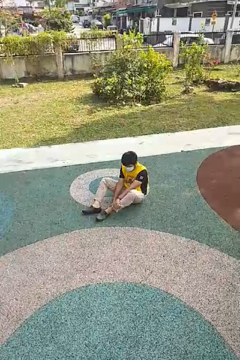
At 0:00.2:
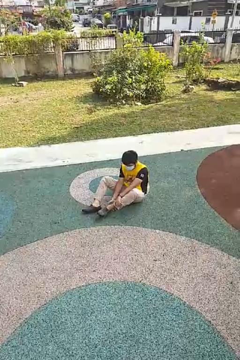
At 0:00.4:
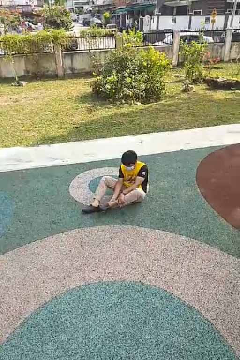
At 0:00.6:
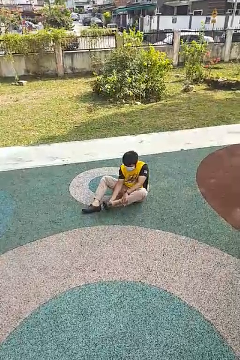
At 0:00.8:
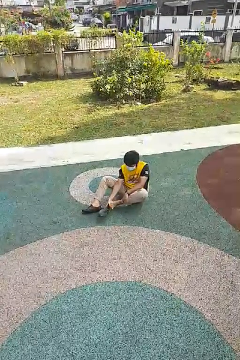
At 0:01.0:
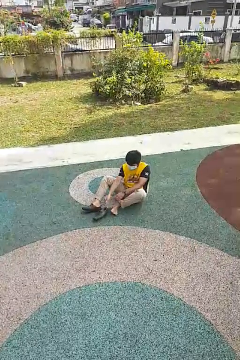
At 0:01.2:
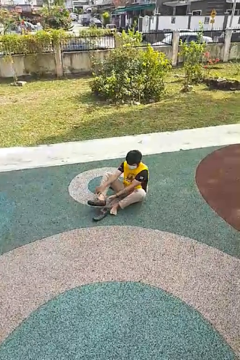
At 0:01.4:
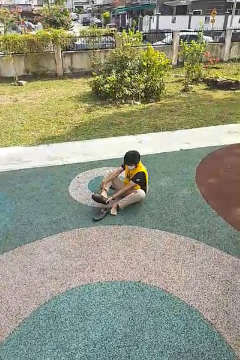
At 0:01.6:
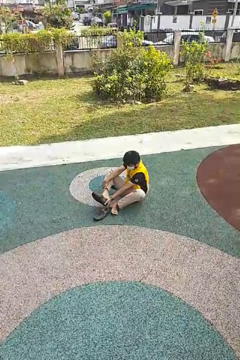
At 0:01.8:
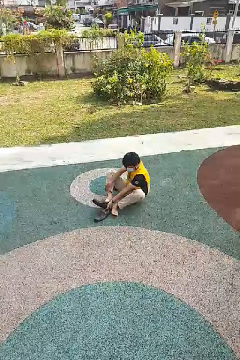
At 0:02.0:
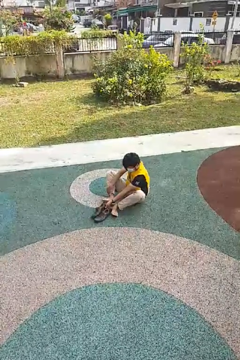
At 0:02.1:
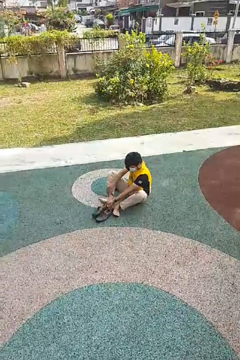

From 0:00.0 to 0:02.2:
person takes off shoes

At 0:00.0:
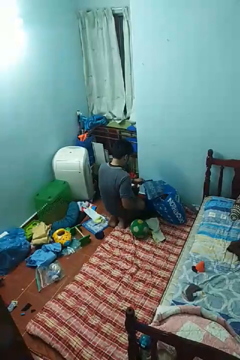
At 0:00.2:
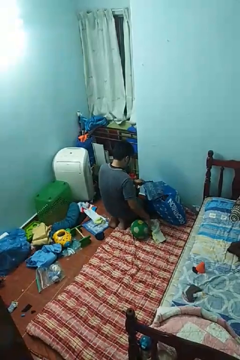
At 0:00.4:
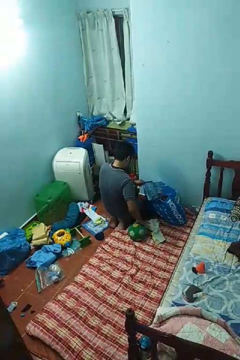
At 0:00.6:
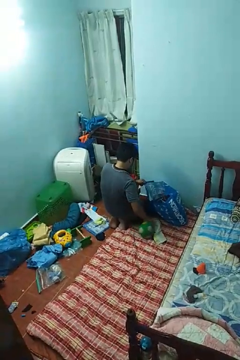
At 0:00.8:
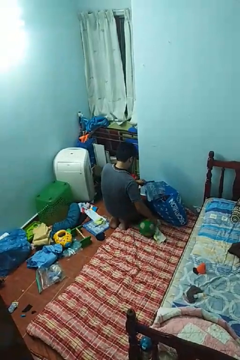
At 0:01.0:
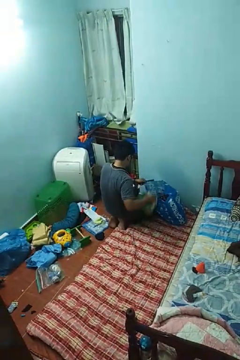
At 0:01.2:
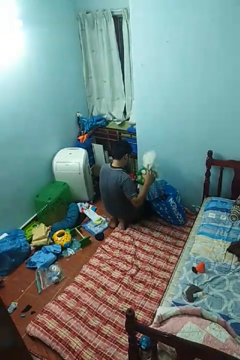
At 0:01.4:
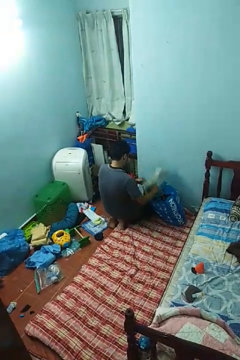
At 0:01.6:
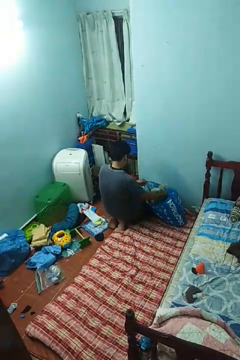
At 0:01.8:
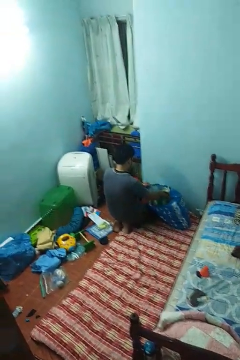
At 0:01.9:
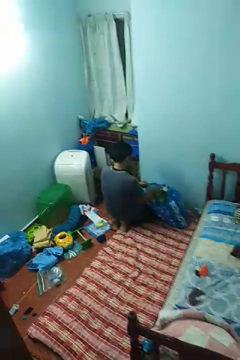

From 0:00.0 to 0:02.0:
person puts object into bag

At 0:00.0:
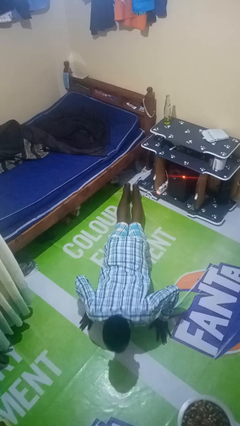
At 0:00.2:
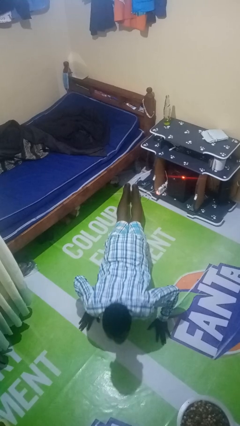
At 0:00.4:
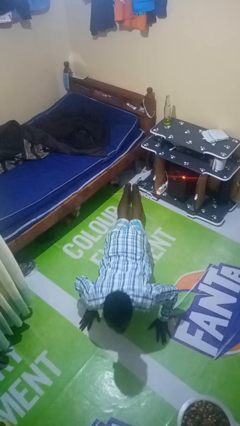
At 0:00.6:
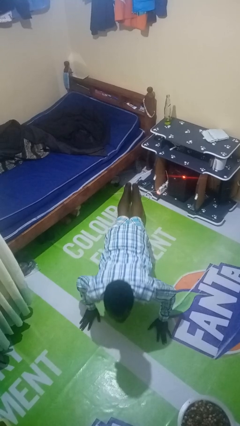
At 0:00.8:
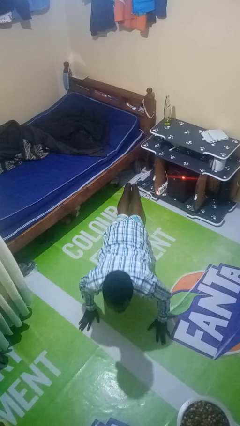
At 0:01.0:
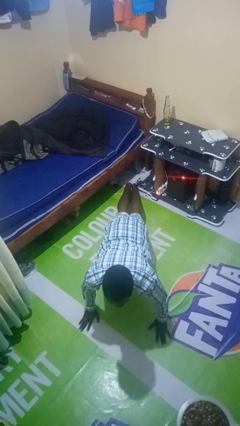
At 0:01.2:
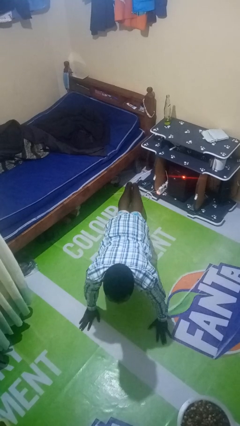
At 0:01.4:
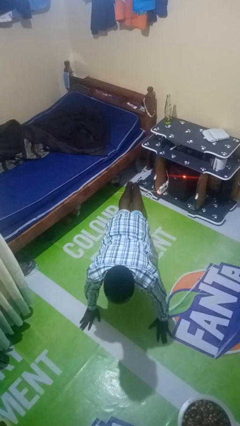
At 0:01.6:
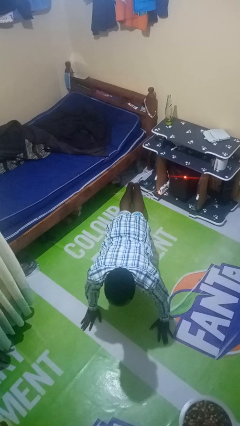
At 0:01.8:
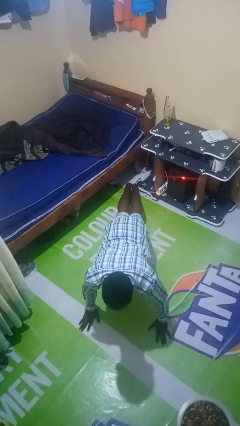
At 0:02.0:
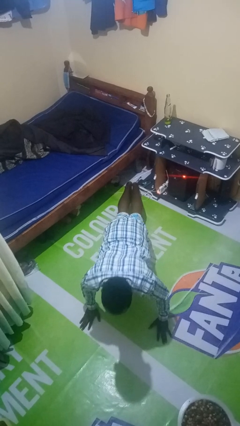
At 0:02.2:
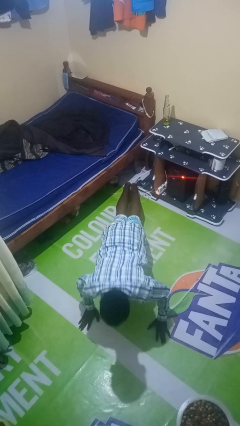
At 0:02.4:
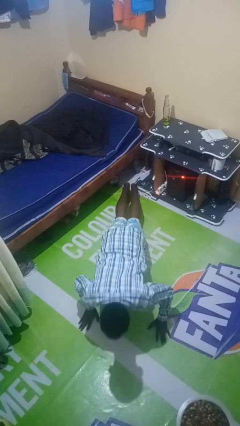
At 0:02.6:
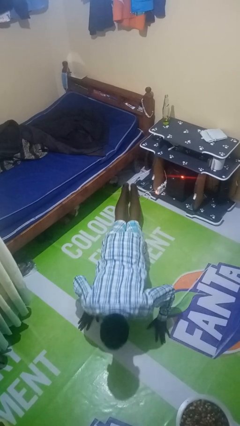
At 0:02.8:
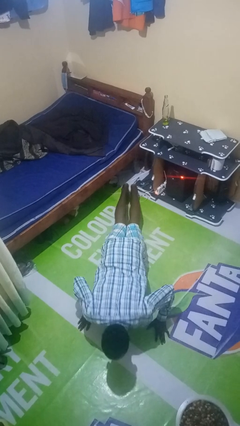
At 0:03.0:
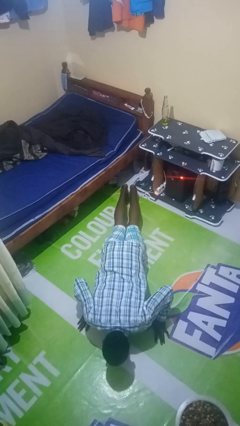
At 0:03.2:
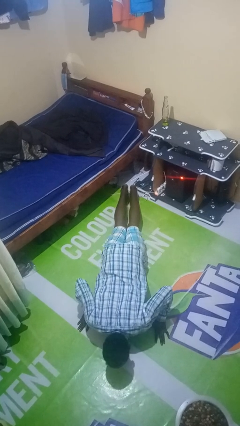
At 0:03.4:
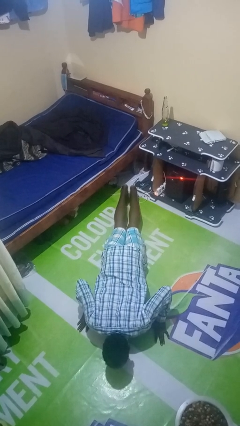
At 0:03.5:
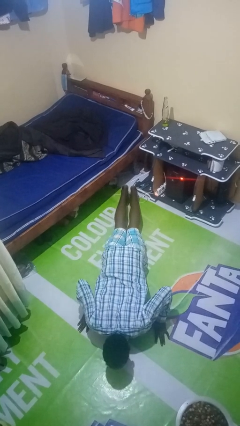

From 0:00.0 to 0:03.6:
person exercises with pushup

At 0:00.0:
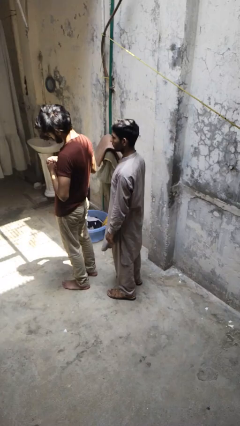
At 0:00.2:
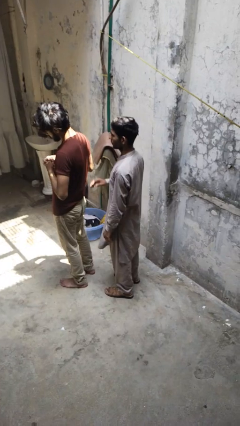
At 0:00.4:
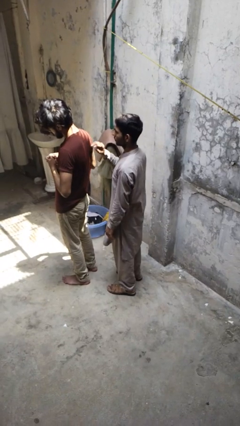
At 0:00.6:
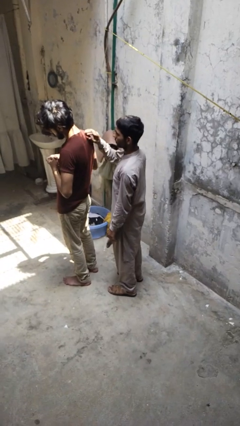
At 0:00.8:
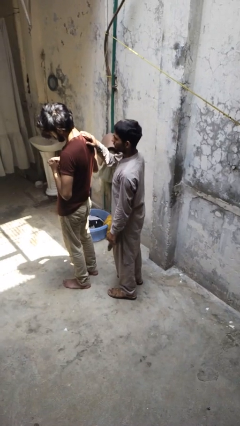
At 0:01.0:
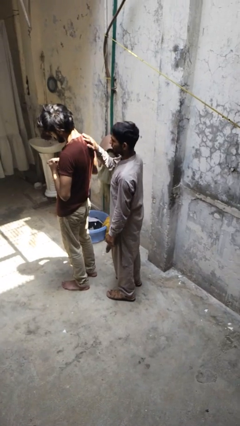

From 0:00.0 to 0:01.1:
person touches back of person

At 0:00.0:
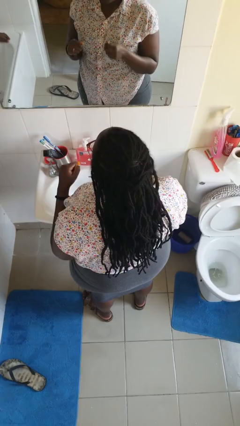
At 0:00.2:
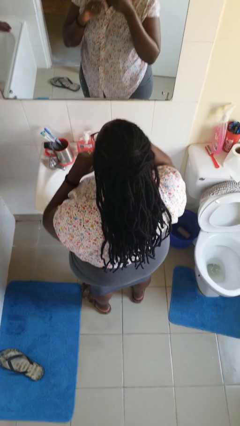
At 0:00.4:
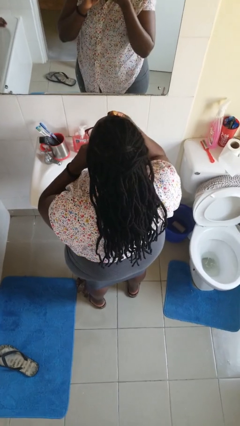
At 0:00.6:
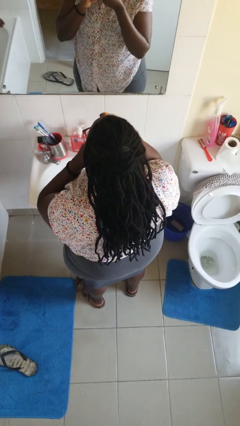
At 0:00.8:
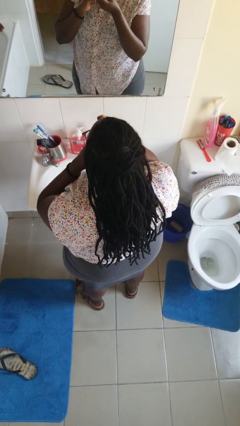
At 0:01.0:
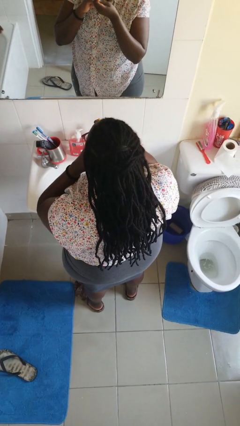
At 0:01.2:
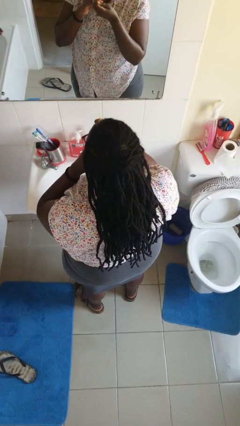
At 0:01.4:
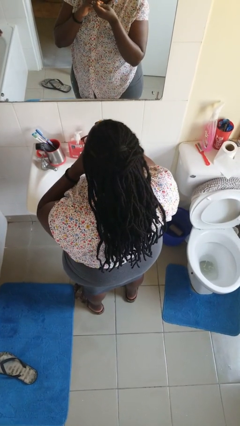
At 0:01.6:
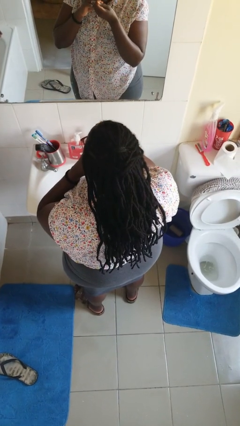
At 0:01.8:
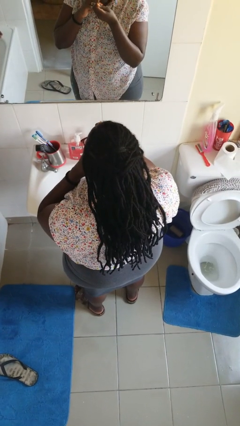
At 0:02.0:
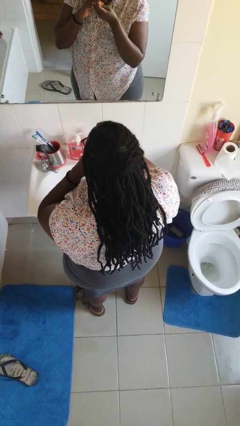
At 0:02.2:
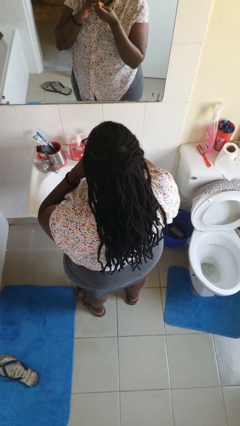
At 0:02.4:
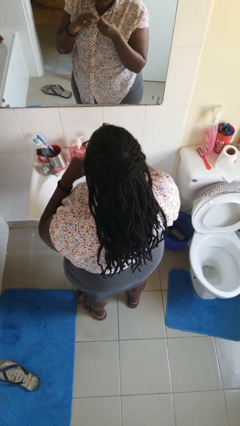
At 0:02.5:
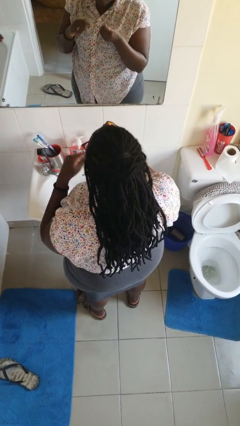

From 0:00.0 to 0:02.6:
person flosses

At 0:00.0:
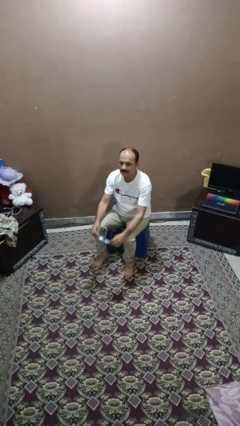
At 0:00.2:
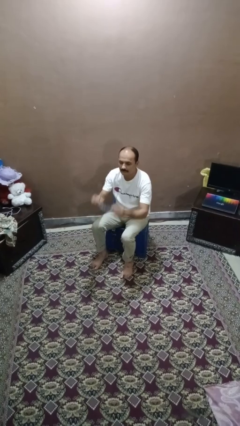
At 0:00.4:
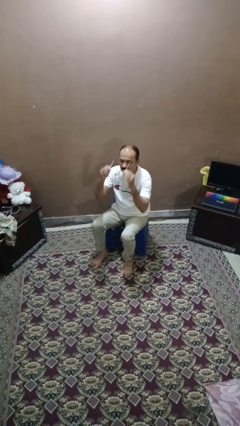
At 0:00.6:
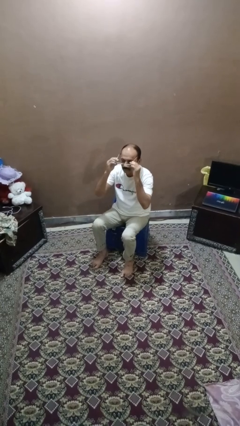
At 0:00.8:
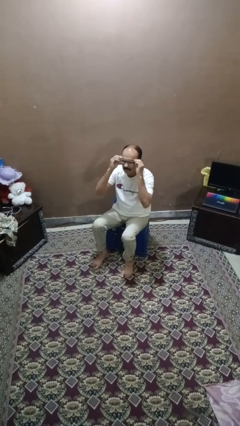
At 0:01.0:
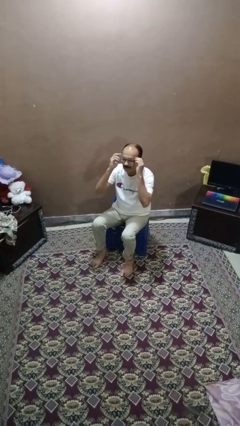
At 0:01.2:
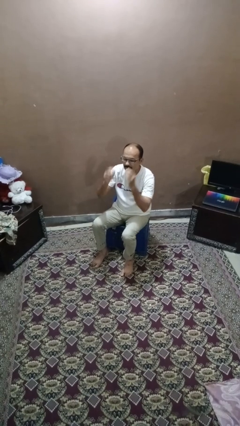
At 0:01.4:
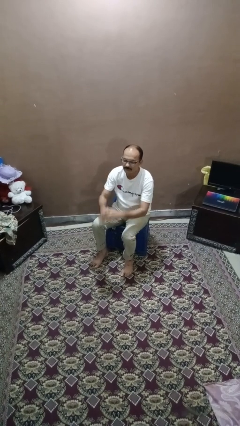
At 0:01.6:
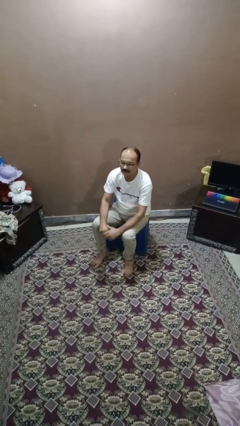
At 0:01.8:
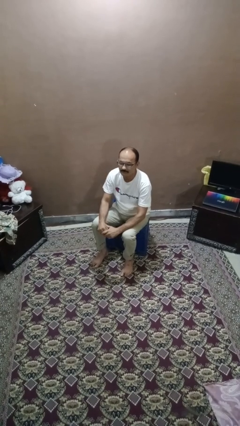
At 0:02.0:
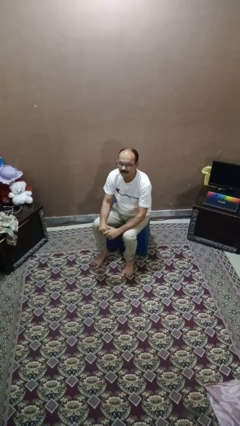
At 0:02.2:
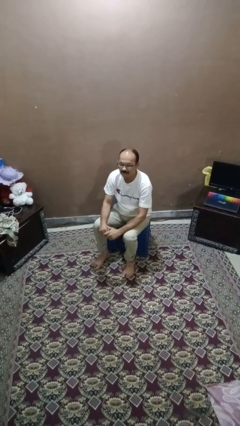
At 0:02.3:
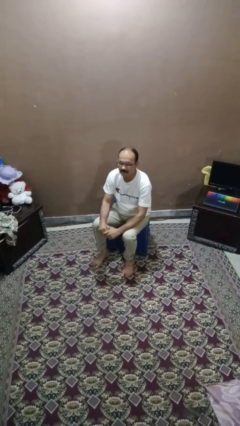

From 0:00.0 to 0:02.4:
person puts on glasses

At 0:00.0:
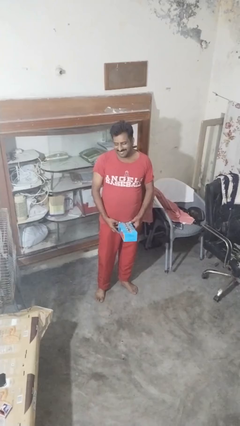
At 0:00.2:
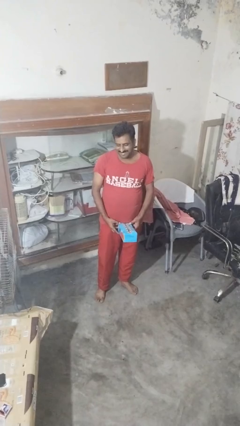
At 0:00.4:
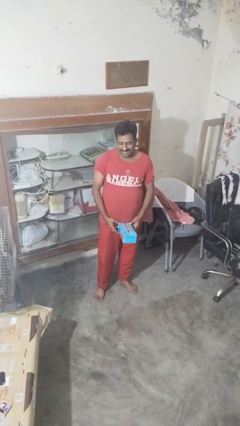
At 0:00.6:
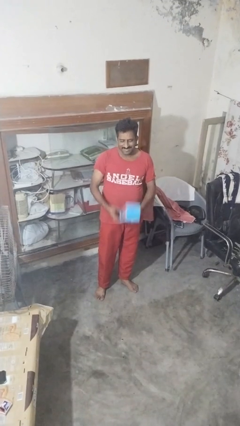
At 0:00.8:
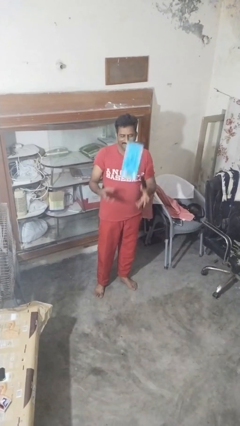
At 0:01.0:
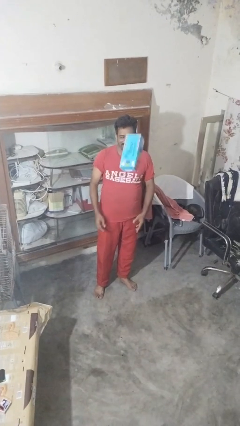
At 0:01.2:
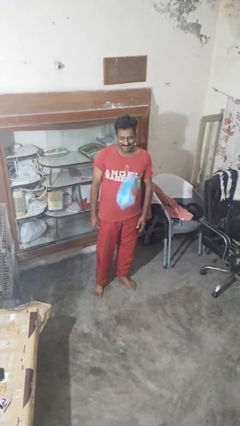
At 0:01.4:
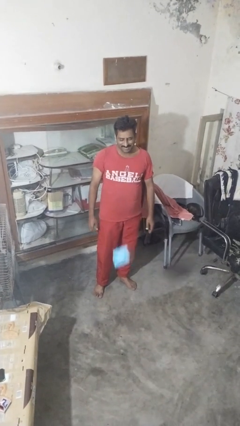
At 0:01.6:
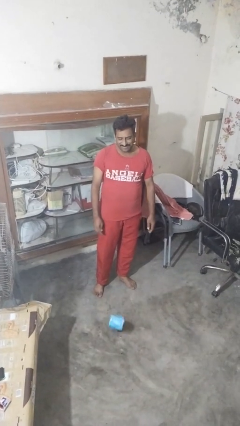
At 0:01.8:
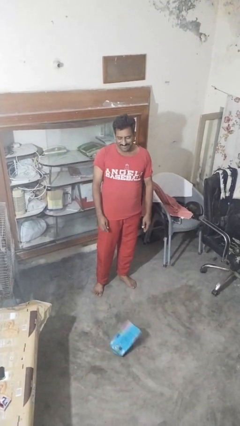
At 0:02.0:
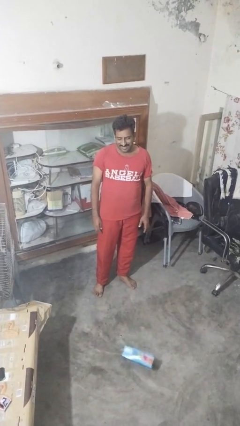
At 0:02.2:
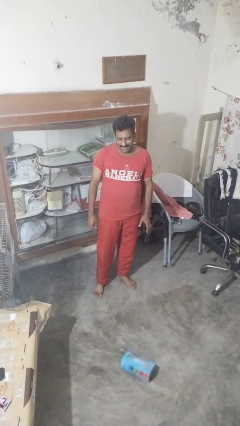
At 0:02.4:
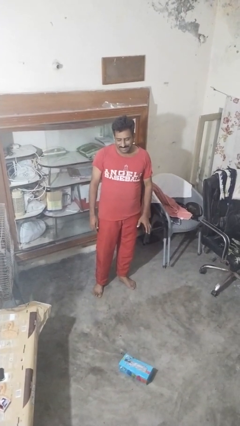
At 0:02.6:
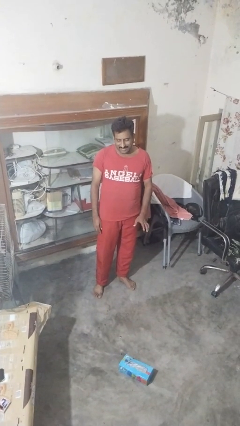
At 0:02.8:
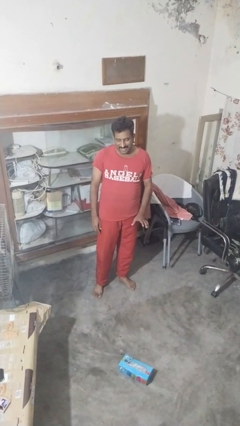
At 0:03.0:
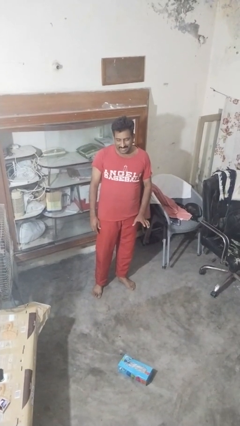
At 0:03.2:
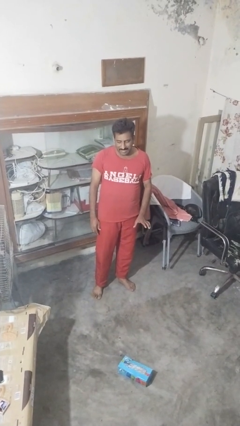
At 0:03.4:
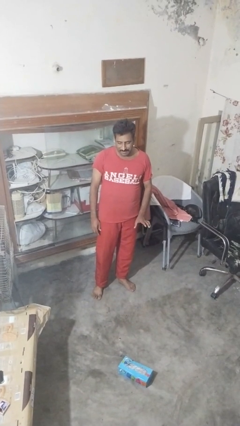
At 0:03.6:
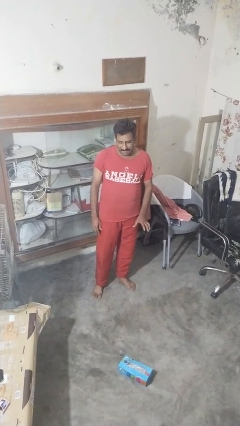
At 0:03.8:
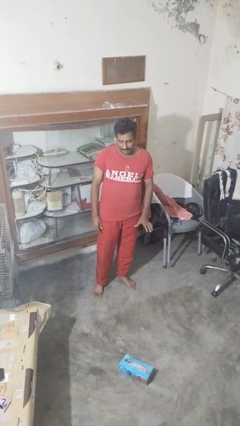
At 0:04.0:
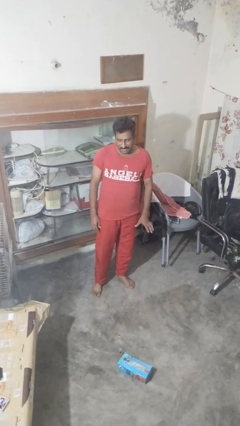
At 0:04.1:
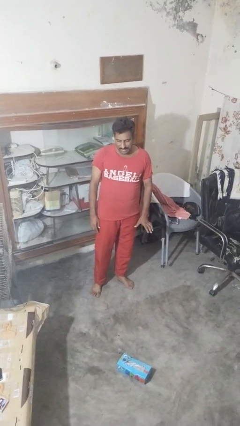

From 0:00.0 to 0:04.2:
person throws object into air
